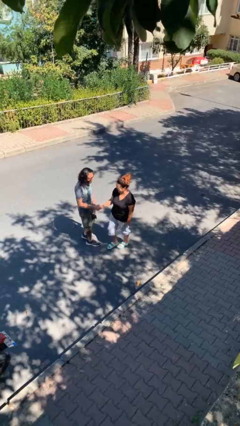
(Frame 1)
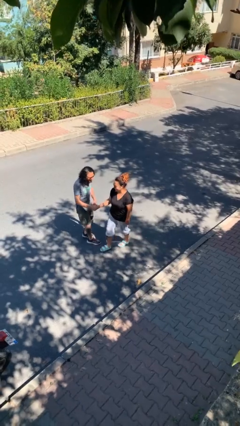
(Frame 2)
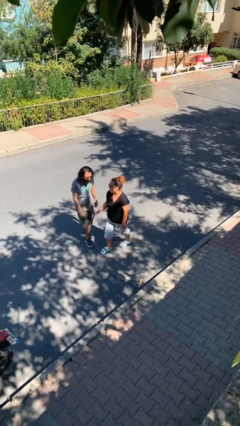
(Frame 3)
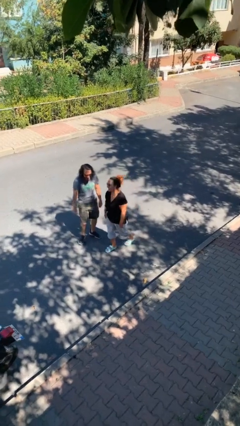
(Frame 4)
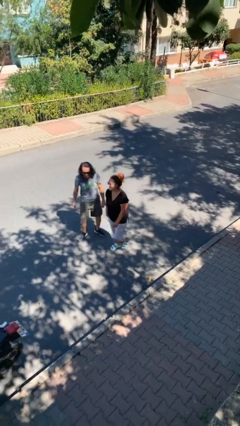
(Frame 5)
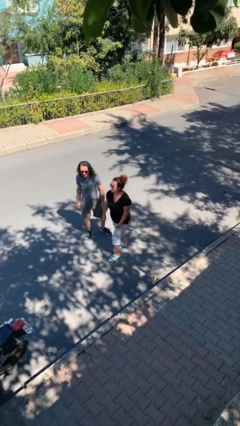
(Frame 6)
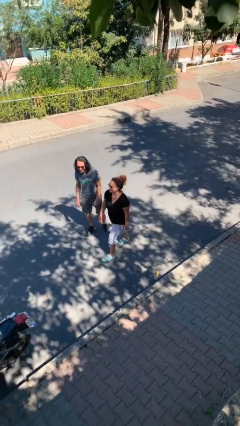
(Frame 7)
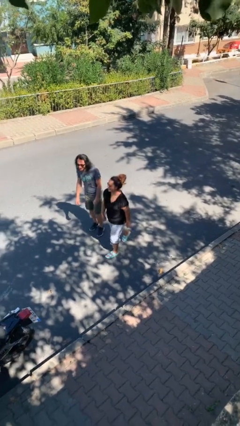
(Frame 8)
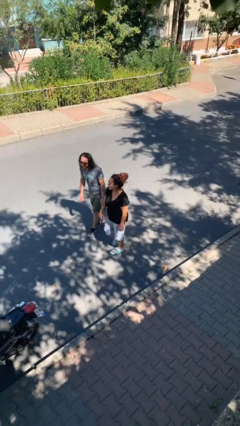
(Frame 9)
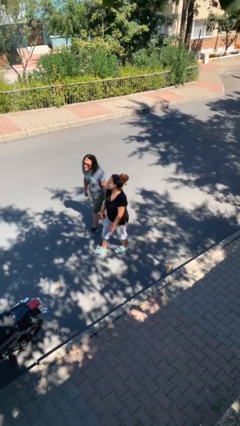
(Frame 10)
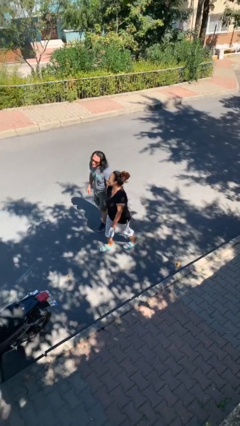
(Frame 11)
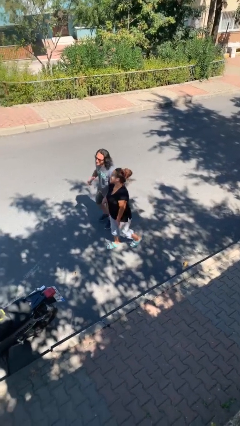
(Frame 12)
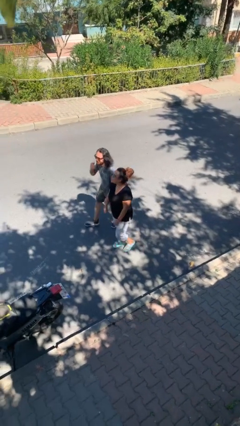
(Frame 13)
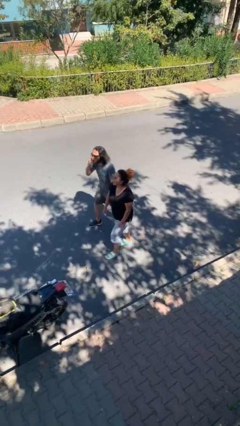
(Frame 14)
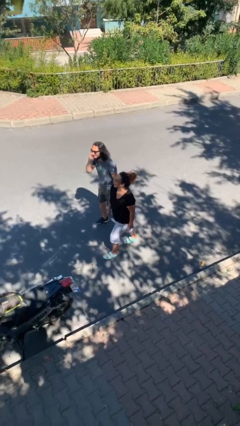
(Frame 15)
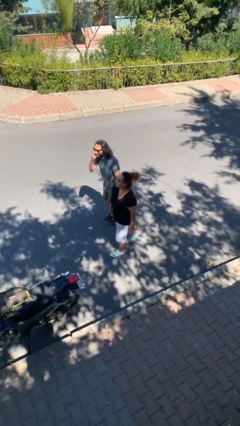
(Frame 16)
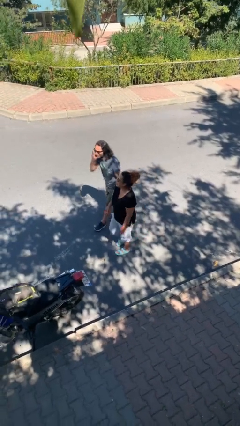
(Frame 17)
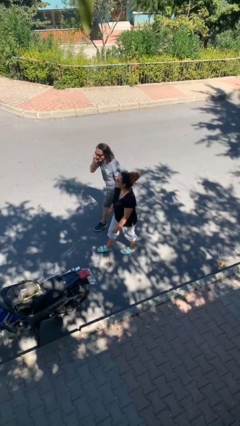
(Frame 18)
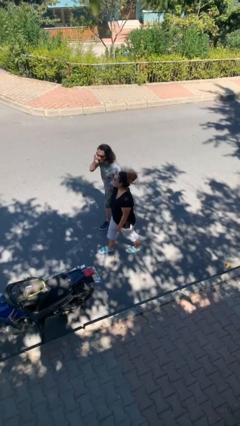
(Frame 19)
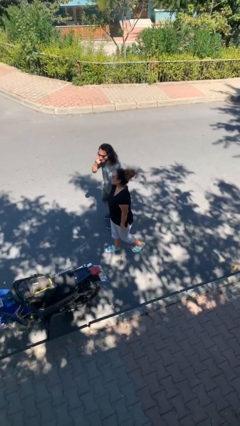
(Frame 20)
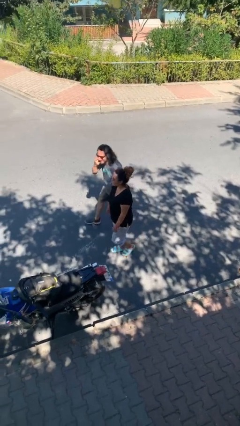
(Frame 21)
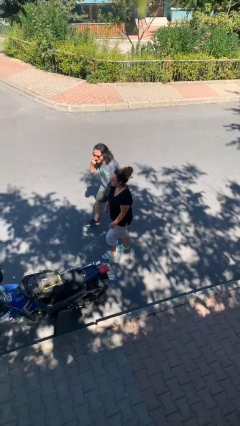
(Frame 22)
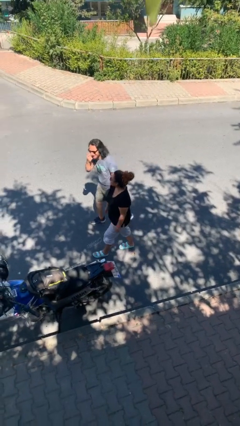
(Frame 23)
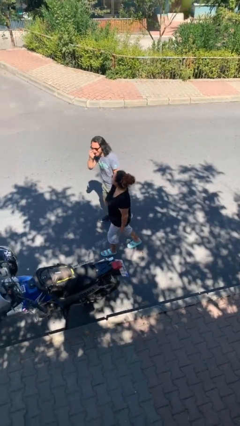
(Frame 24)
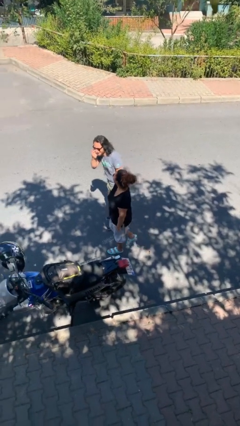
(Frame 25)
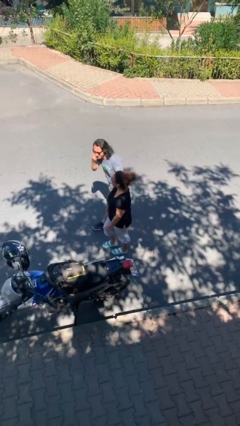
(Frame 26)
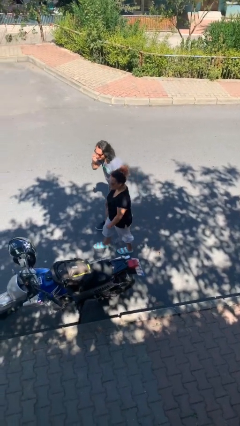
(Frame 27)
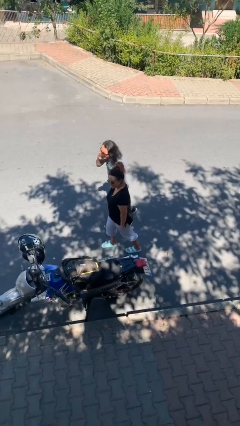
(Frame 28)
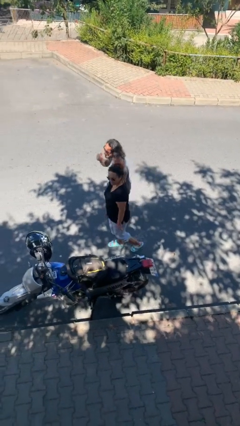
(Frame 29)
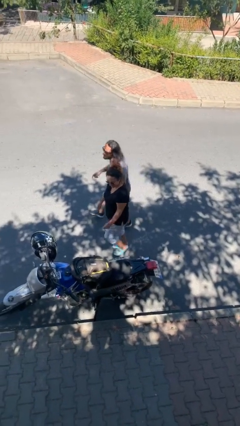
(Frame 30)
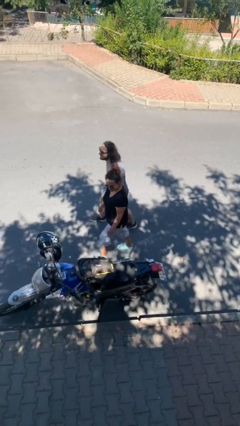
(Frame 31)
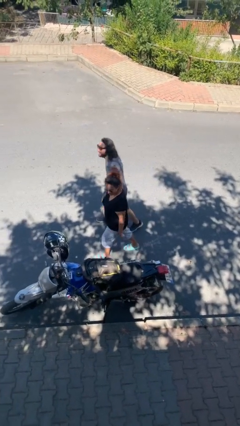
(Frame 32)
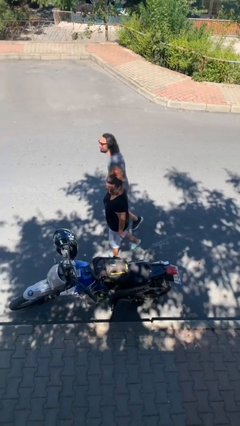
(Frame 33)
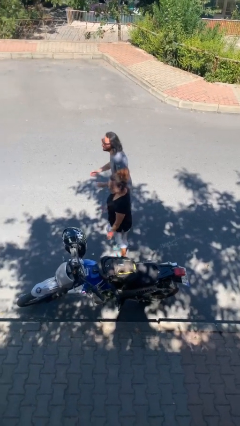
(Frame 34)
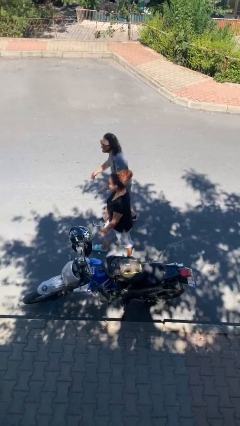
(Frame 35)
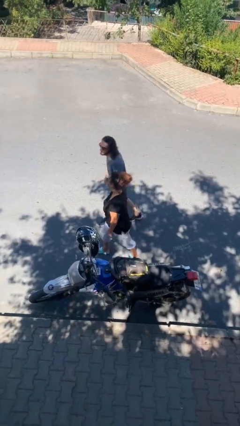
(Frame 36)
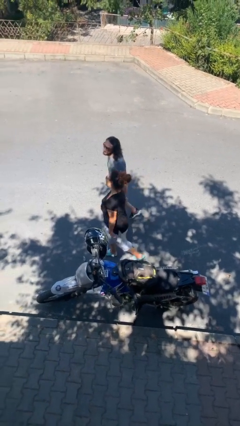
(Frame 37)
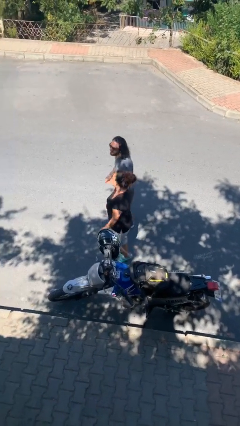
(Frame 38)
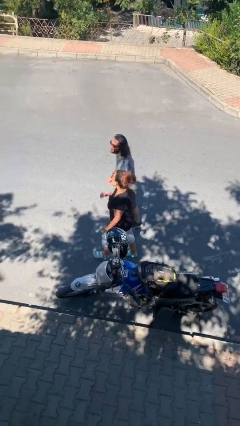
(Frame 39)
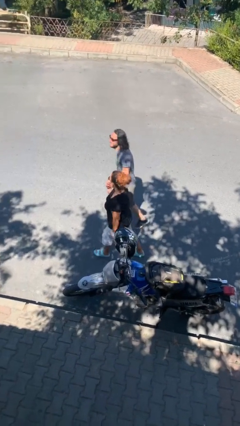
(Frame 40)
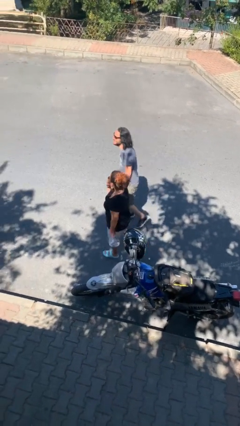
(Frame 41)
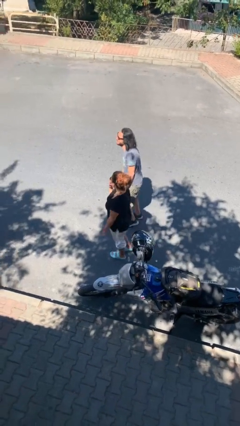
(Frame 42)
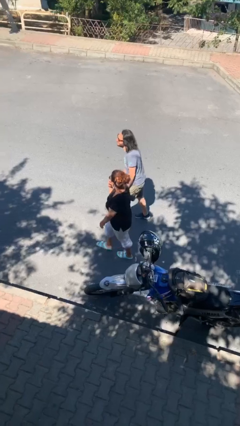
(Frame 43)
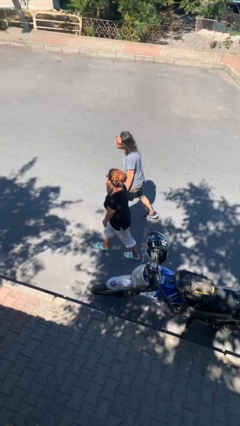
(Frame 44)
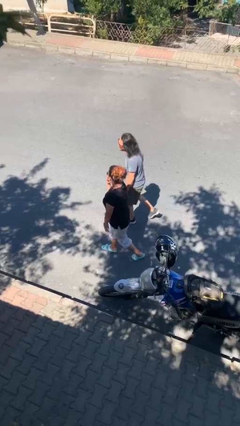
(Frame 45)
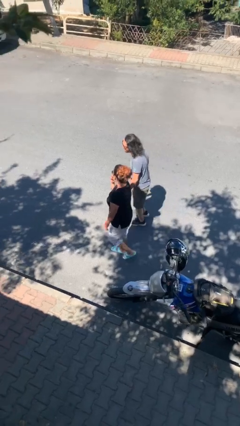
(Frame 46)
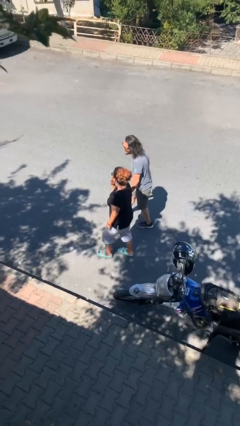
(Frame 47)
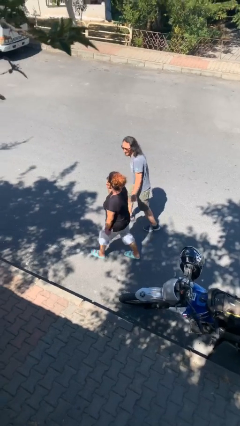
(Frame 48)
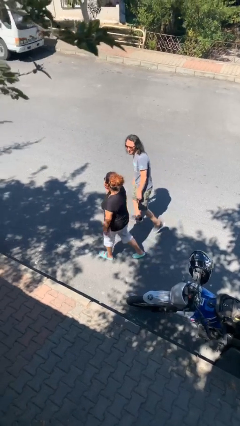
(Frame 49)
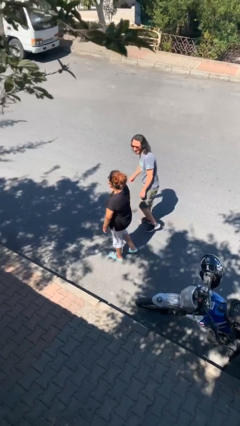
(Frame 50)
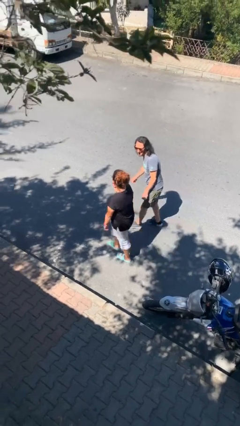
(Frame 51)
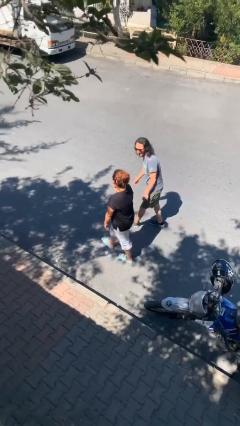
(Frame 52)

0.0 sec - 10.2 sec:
person talks to person

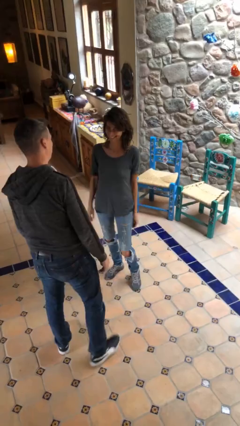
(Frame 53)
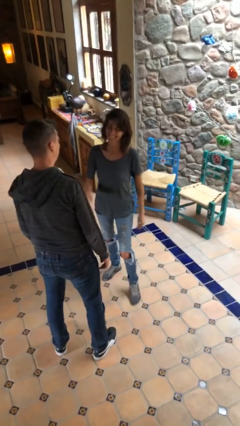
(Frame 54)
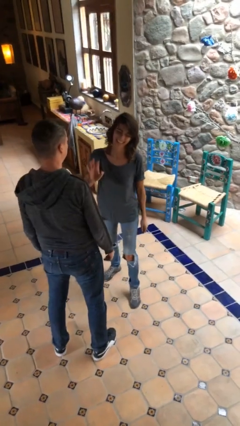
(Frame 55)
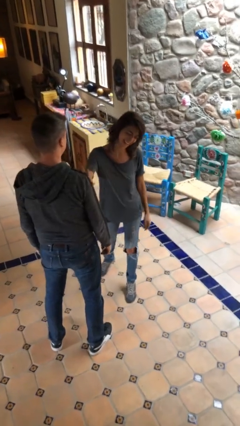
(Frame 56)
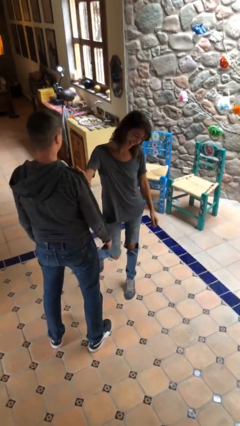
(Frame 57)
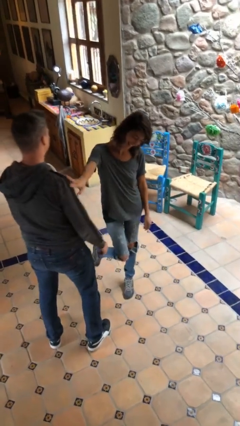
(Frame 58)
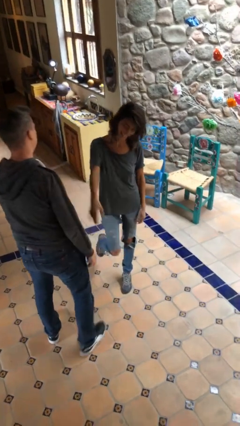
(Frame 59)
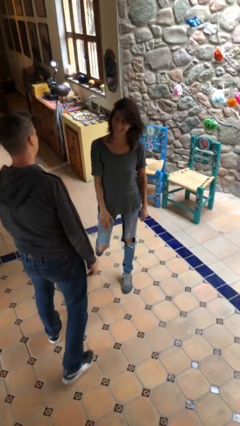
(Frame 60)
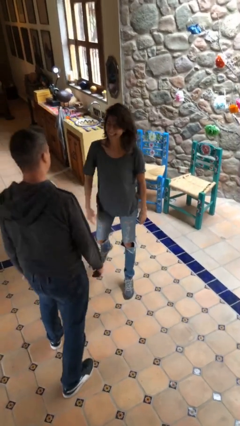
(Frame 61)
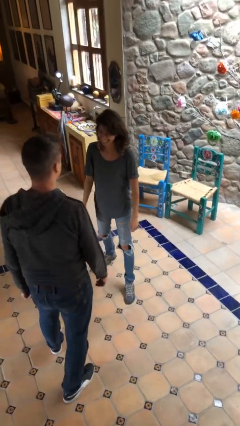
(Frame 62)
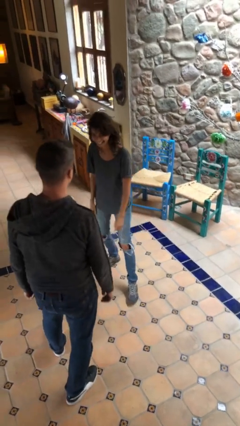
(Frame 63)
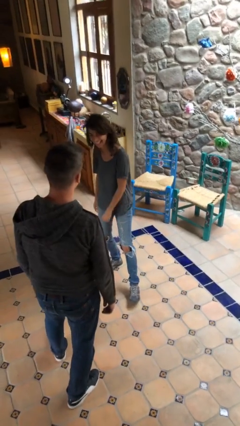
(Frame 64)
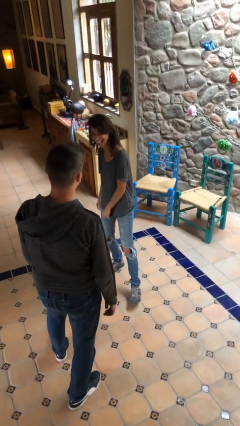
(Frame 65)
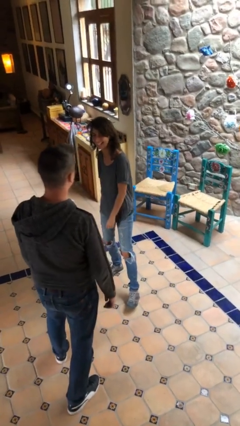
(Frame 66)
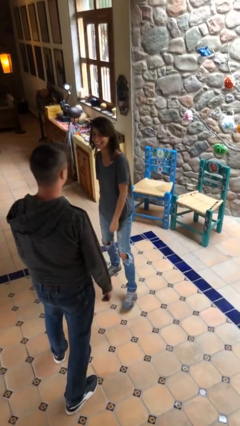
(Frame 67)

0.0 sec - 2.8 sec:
person shoves person

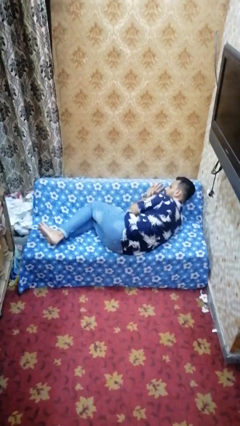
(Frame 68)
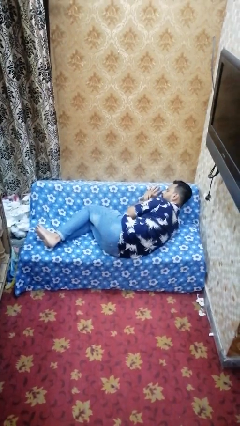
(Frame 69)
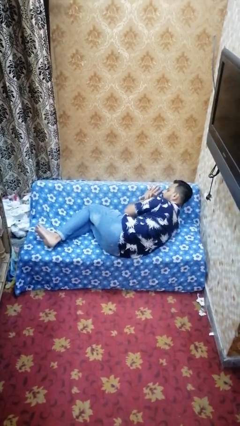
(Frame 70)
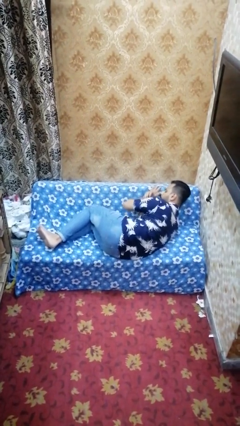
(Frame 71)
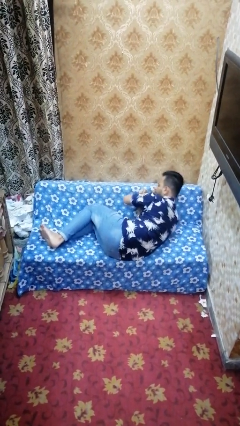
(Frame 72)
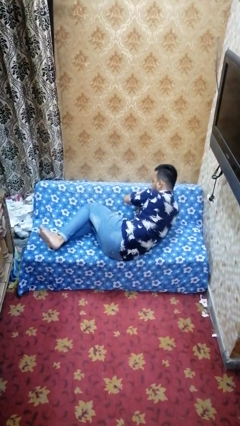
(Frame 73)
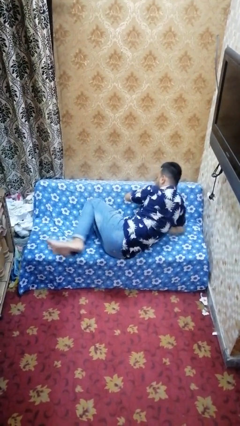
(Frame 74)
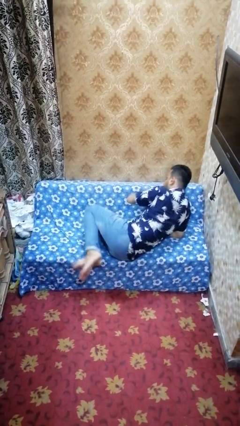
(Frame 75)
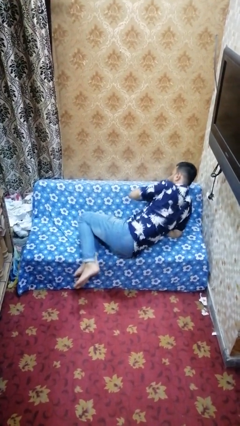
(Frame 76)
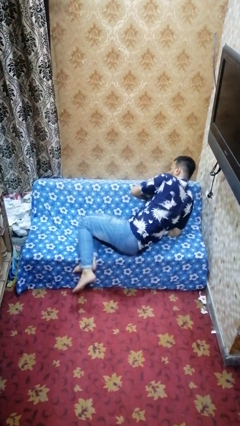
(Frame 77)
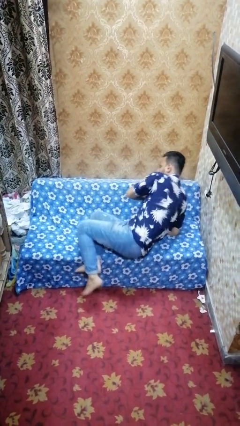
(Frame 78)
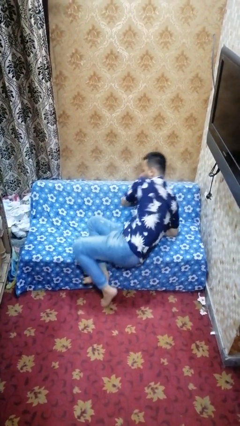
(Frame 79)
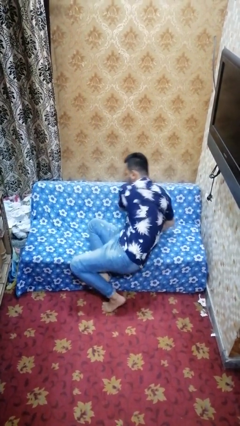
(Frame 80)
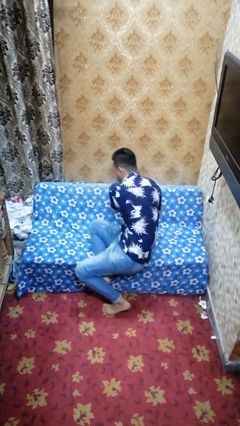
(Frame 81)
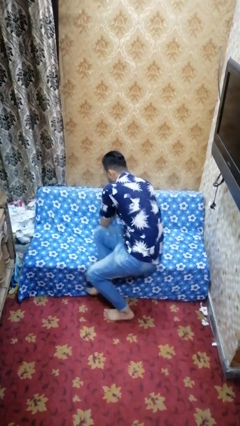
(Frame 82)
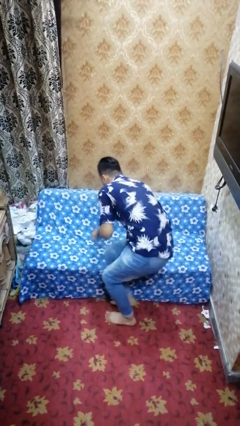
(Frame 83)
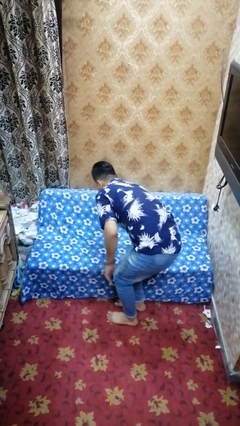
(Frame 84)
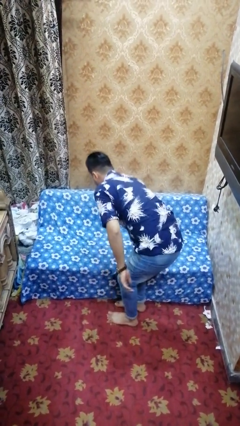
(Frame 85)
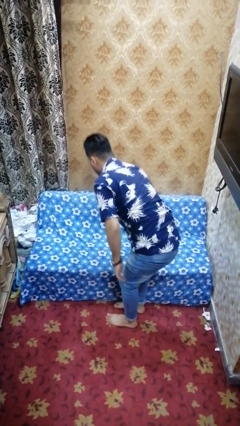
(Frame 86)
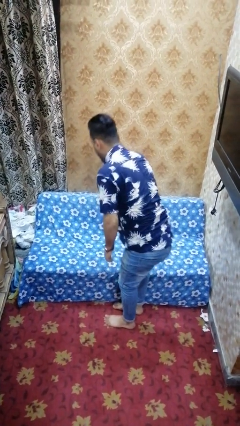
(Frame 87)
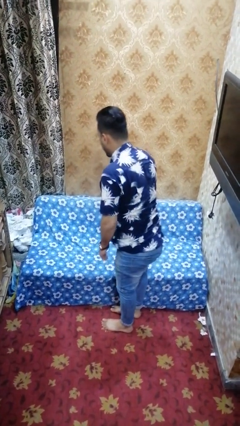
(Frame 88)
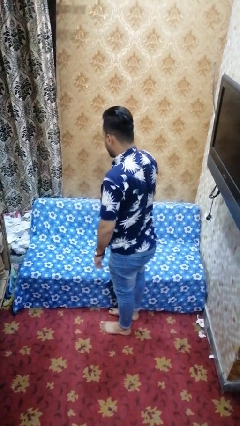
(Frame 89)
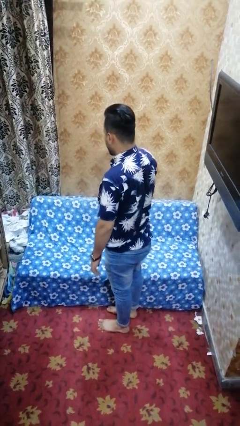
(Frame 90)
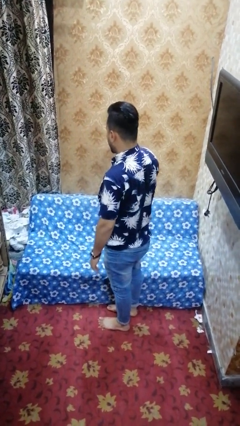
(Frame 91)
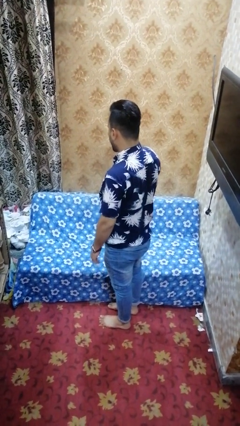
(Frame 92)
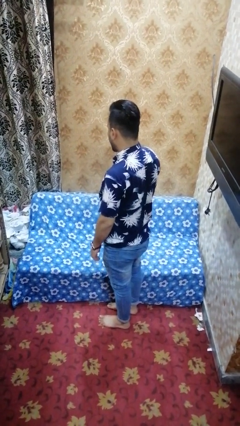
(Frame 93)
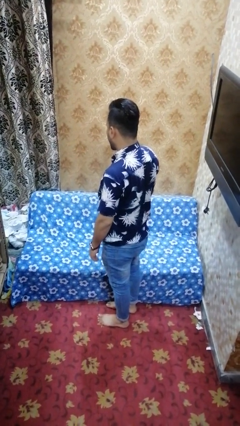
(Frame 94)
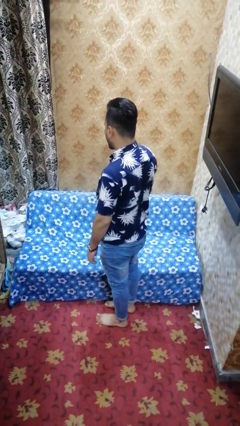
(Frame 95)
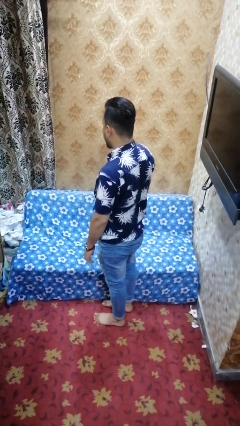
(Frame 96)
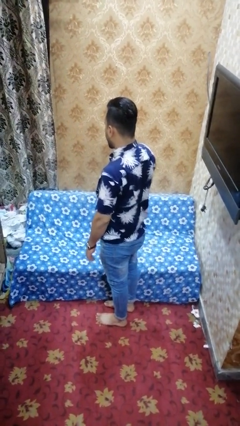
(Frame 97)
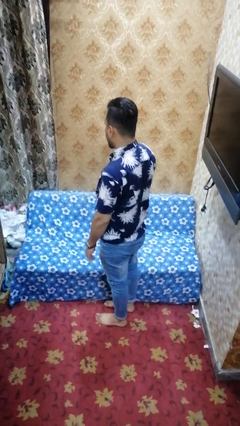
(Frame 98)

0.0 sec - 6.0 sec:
person stands up
